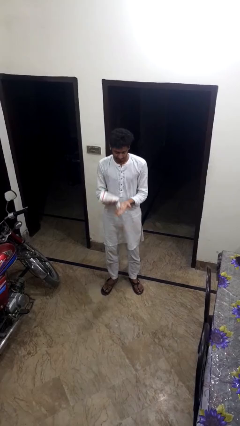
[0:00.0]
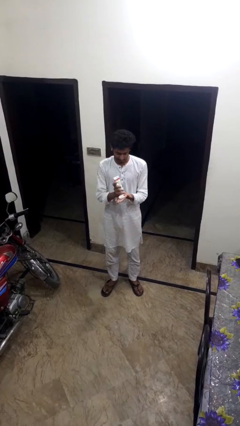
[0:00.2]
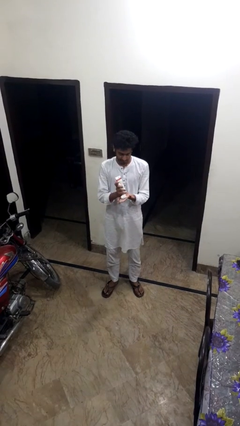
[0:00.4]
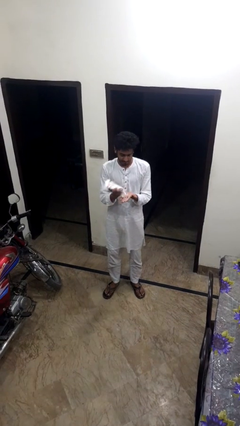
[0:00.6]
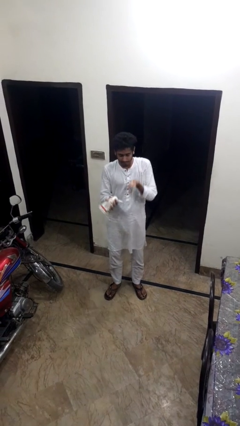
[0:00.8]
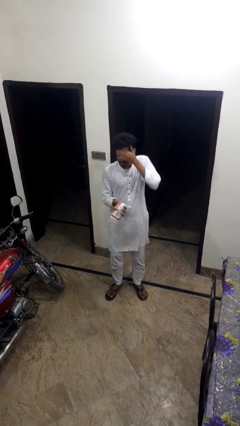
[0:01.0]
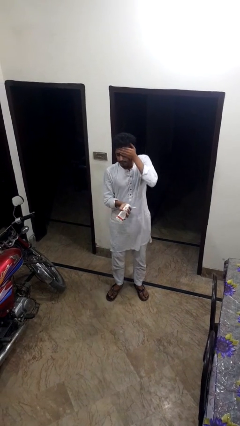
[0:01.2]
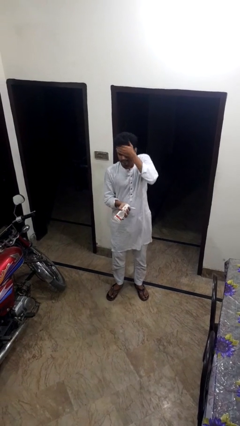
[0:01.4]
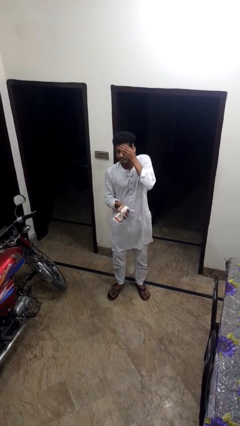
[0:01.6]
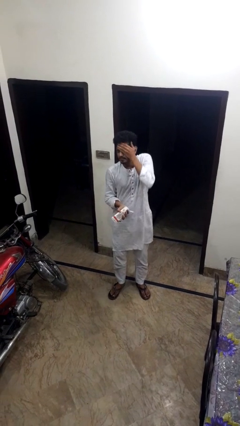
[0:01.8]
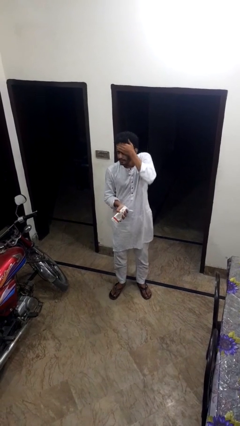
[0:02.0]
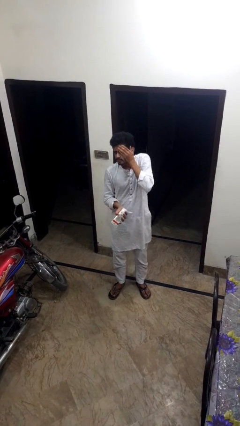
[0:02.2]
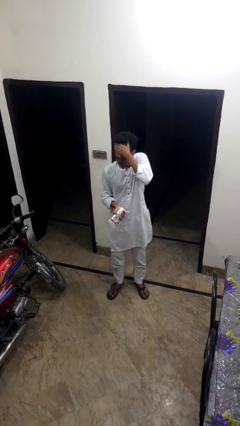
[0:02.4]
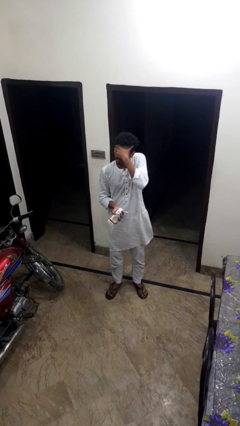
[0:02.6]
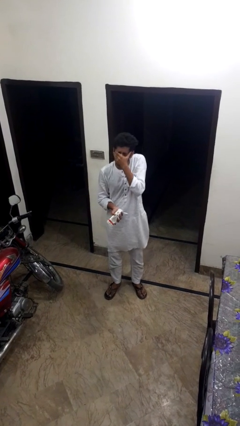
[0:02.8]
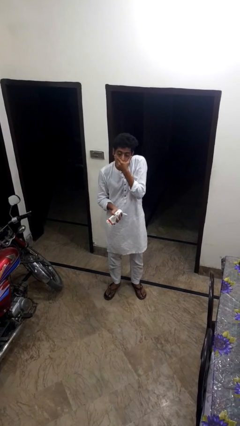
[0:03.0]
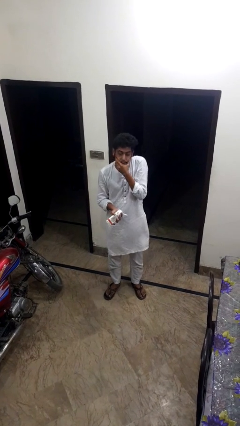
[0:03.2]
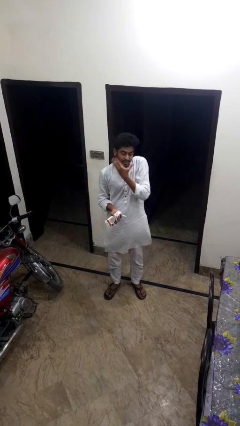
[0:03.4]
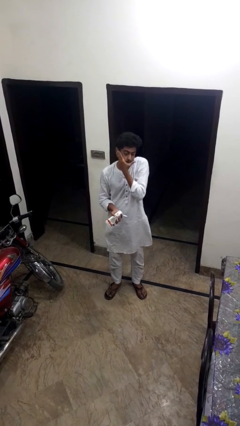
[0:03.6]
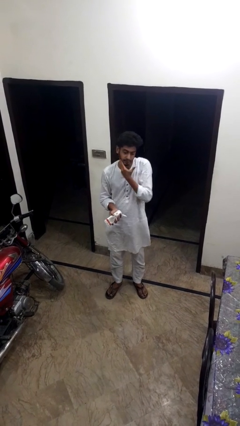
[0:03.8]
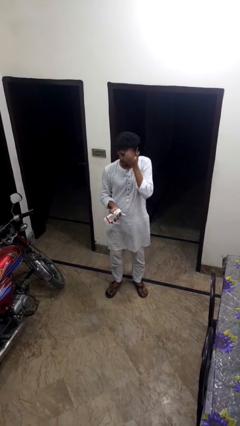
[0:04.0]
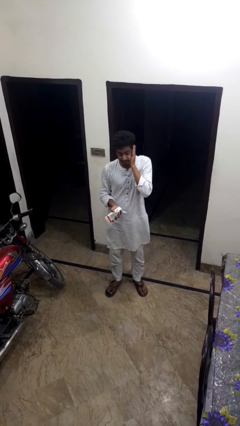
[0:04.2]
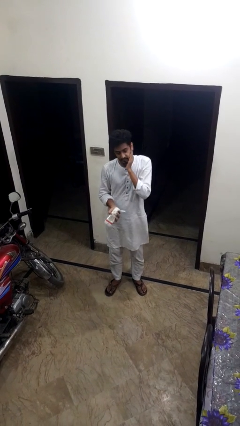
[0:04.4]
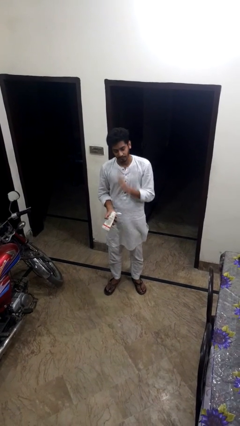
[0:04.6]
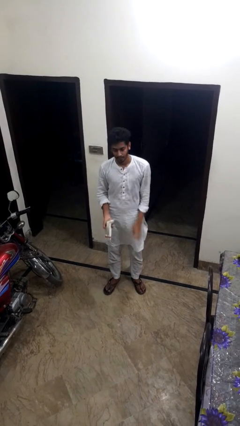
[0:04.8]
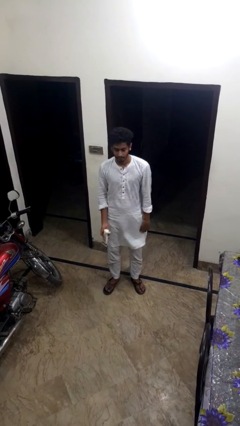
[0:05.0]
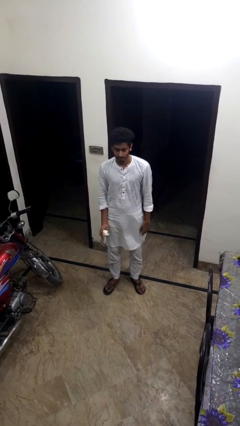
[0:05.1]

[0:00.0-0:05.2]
person applies sunscreen

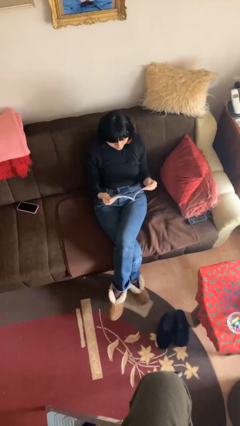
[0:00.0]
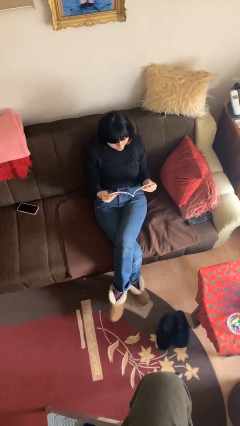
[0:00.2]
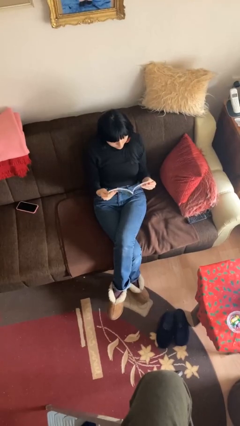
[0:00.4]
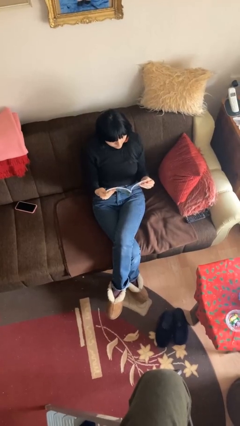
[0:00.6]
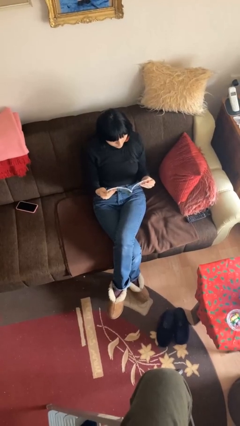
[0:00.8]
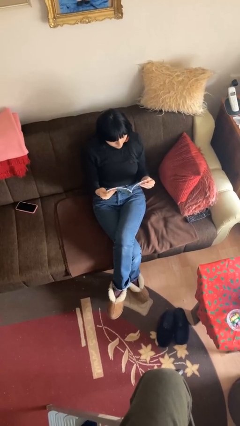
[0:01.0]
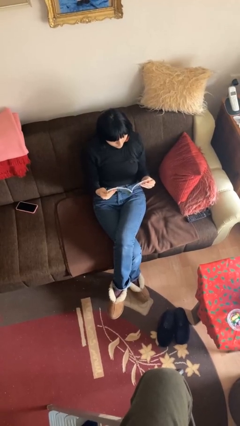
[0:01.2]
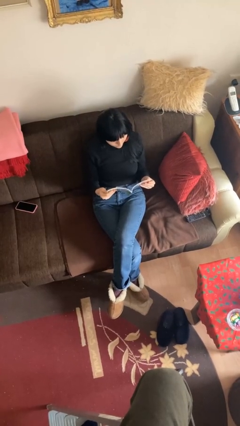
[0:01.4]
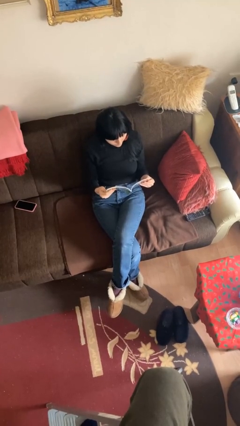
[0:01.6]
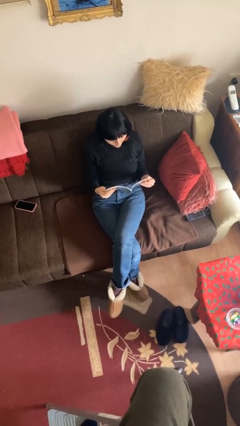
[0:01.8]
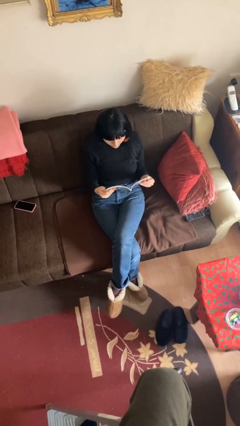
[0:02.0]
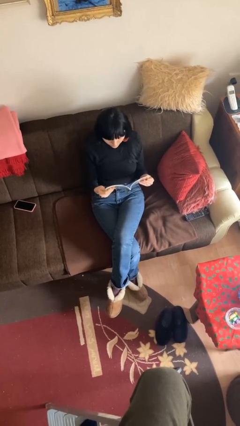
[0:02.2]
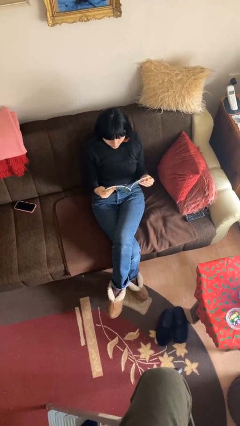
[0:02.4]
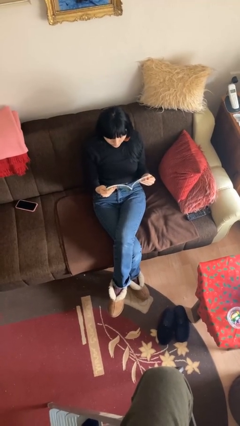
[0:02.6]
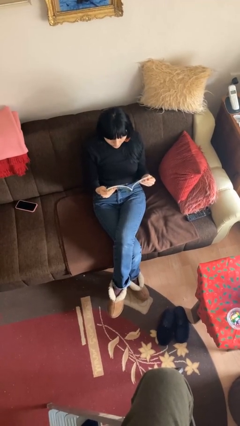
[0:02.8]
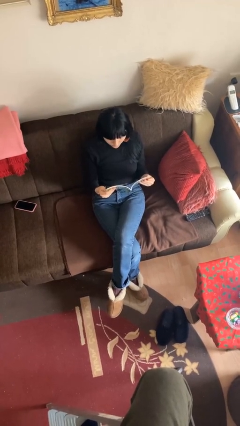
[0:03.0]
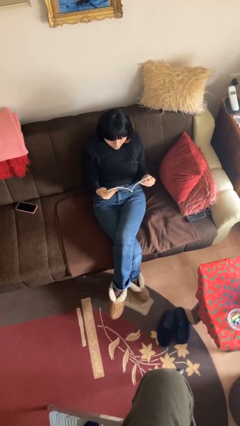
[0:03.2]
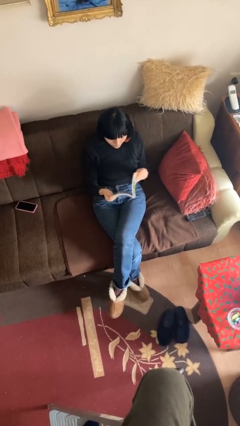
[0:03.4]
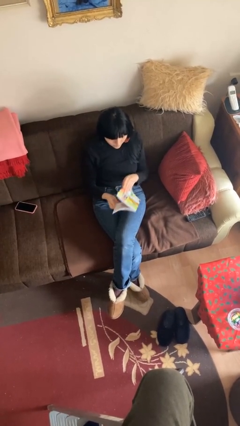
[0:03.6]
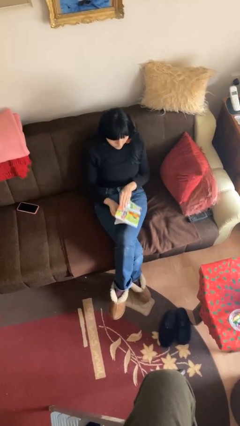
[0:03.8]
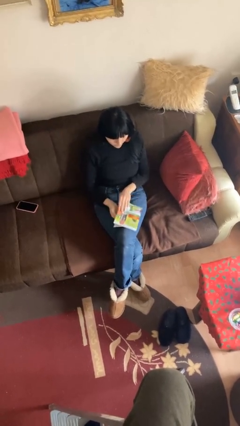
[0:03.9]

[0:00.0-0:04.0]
person reads document

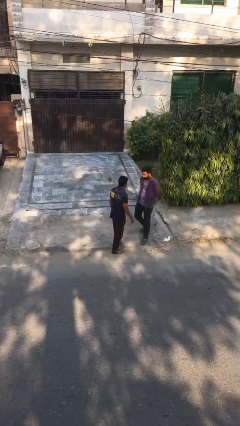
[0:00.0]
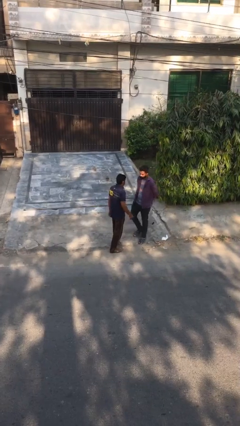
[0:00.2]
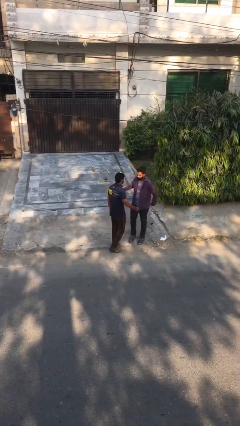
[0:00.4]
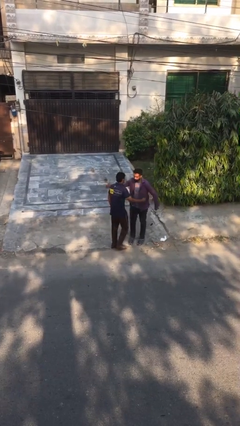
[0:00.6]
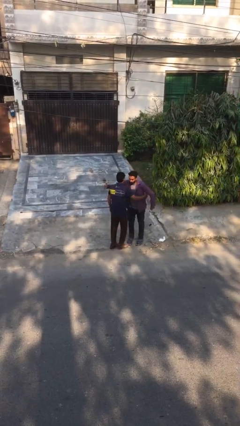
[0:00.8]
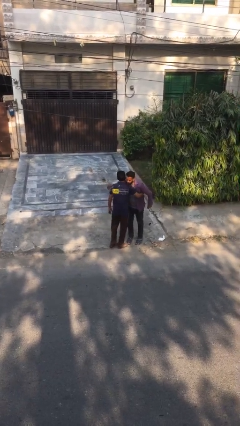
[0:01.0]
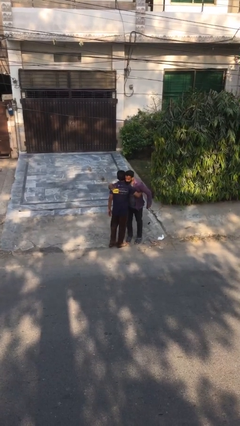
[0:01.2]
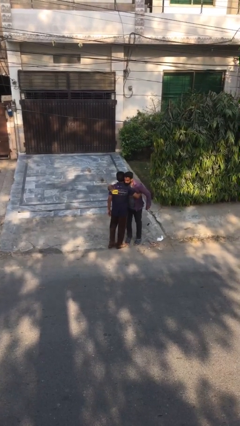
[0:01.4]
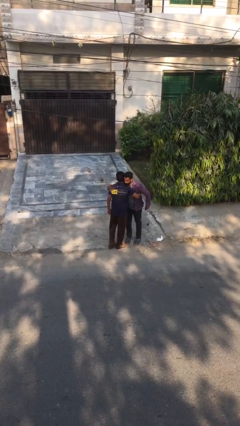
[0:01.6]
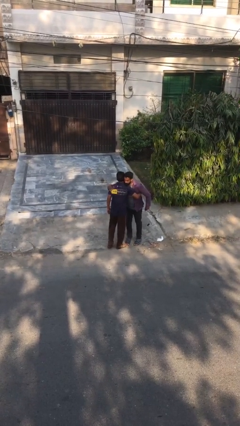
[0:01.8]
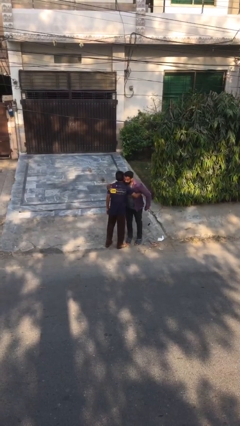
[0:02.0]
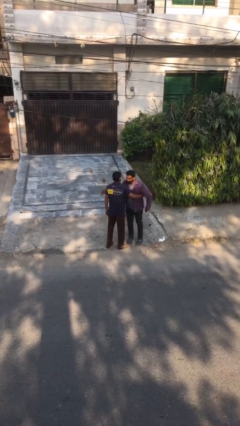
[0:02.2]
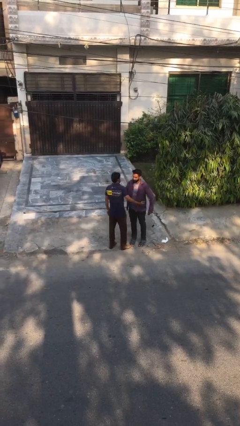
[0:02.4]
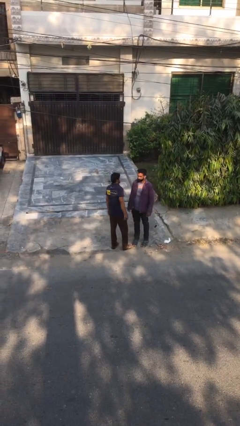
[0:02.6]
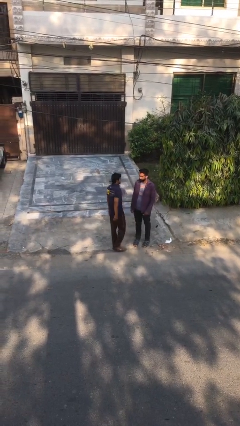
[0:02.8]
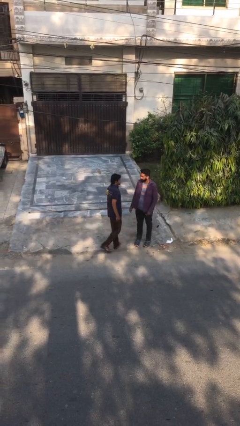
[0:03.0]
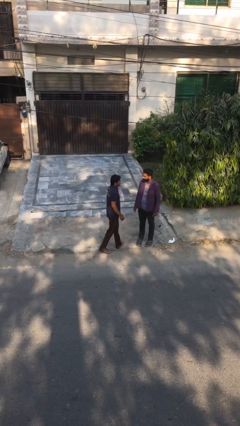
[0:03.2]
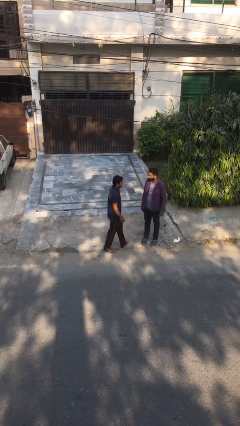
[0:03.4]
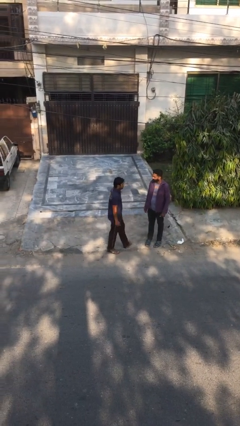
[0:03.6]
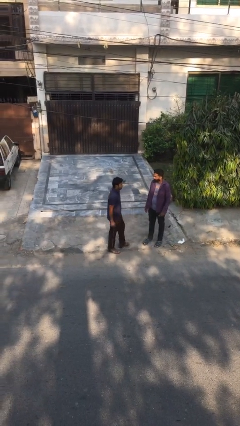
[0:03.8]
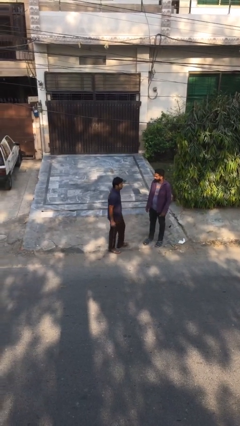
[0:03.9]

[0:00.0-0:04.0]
person embraces person

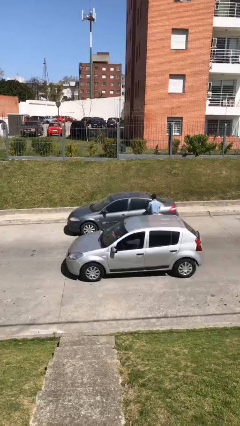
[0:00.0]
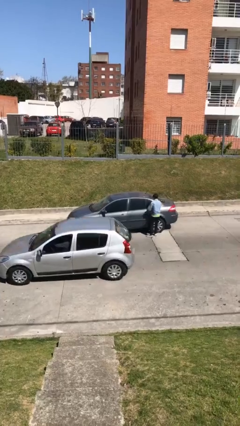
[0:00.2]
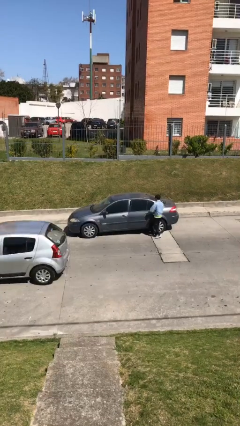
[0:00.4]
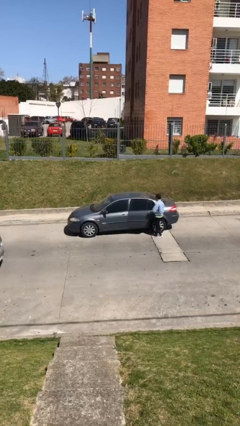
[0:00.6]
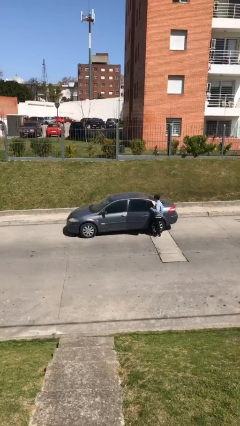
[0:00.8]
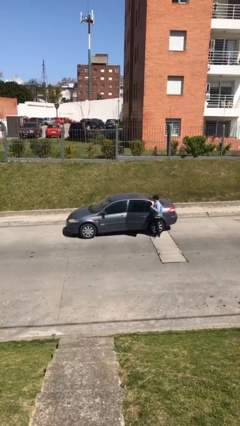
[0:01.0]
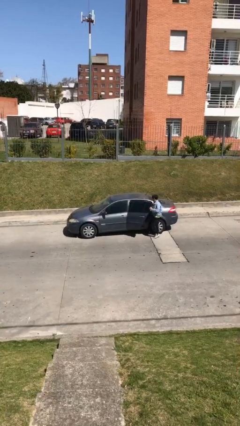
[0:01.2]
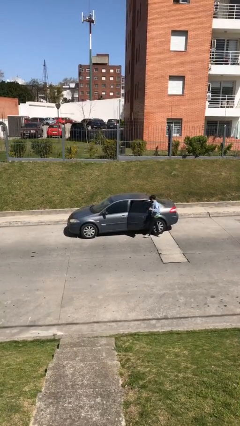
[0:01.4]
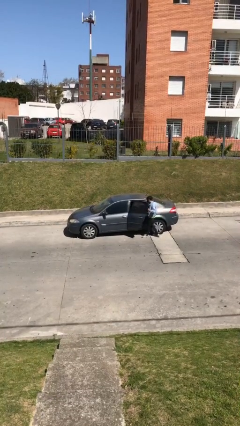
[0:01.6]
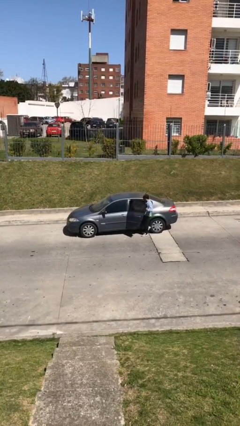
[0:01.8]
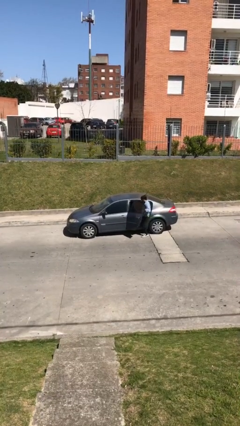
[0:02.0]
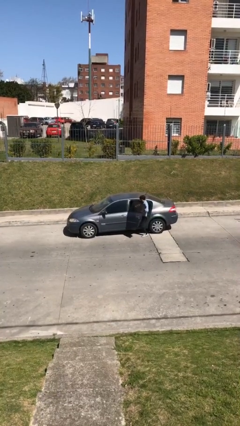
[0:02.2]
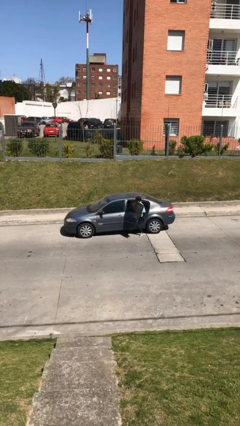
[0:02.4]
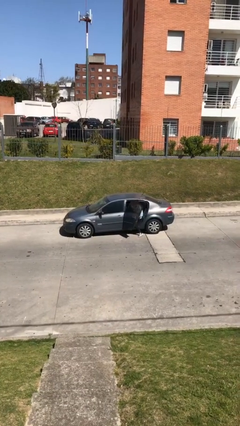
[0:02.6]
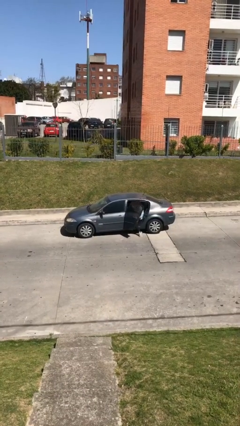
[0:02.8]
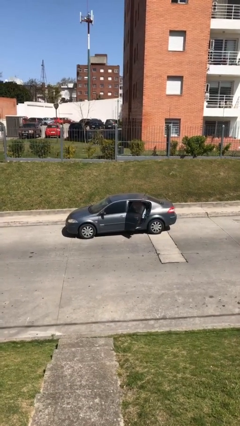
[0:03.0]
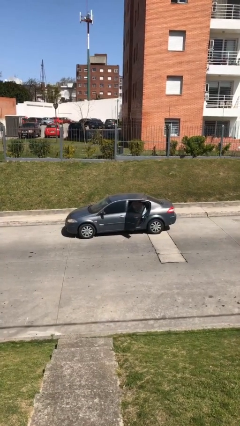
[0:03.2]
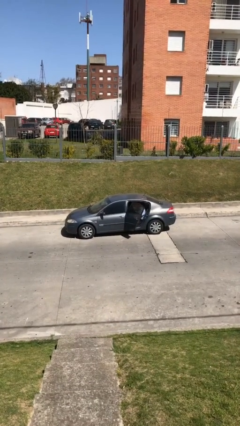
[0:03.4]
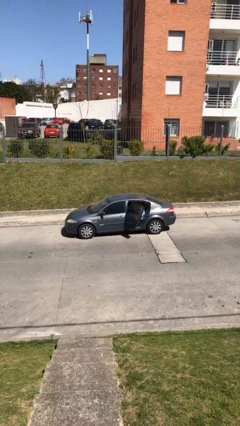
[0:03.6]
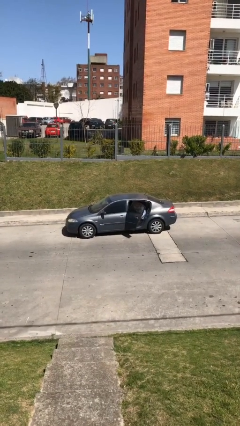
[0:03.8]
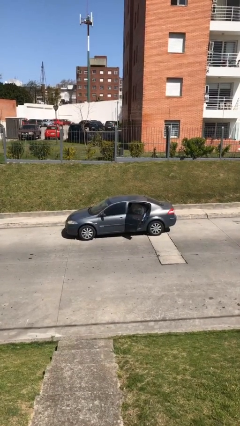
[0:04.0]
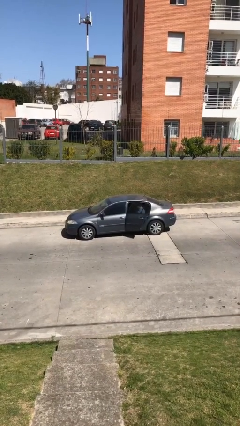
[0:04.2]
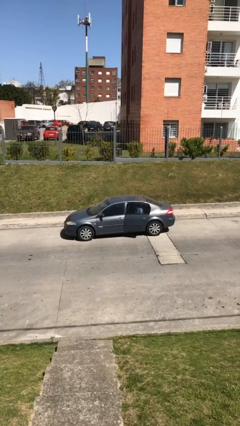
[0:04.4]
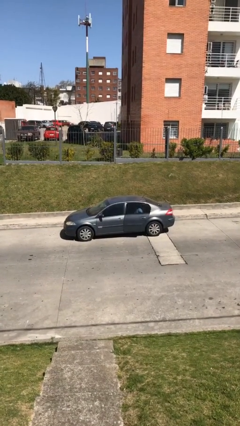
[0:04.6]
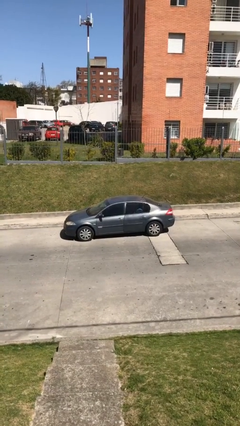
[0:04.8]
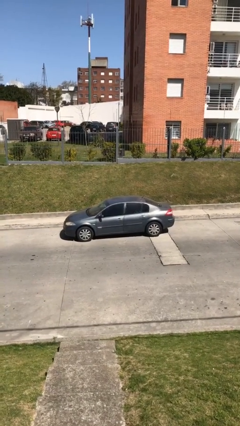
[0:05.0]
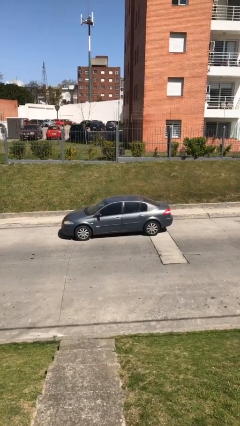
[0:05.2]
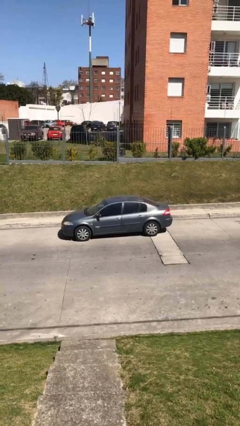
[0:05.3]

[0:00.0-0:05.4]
car picks up person
